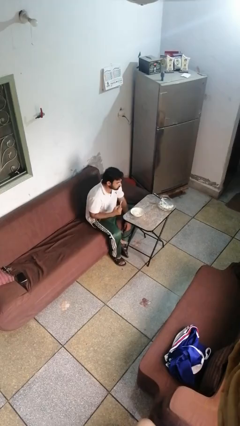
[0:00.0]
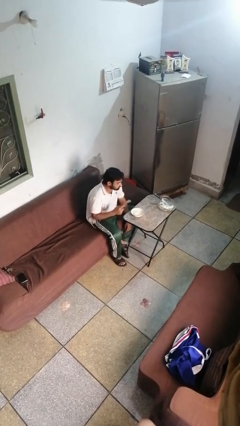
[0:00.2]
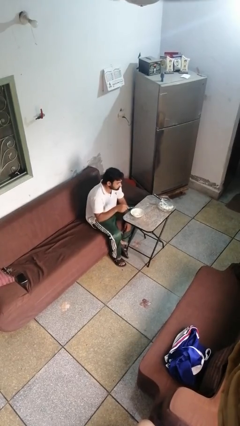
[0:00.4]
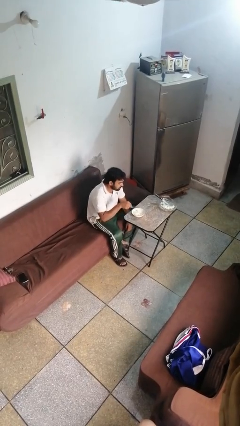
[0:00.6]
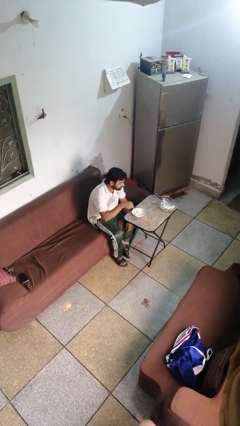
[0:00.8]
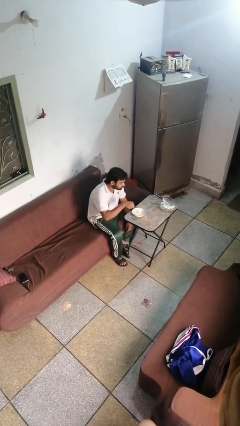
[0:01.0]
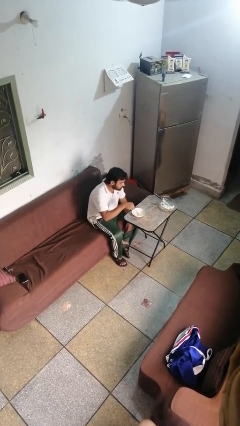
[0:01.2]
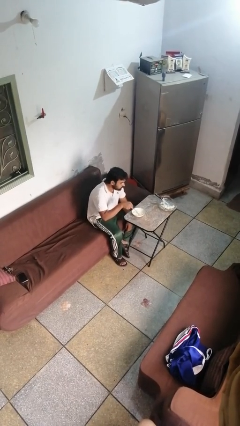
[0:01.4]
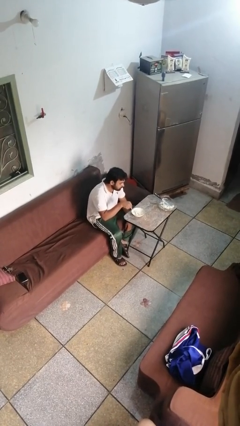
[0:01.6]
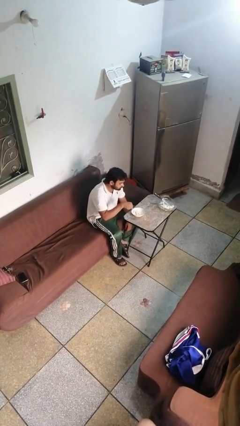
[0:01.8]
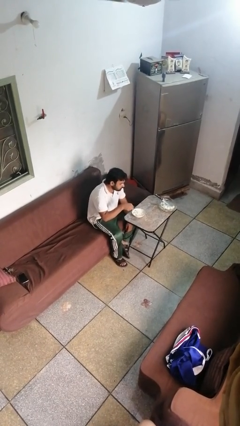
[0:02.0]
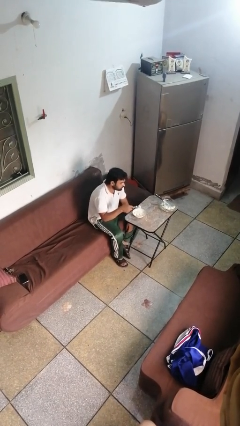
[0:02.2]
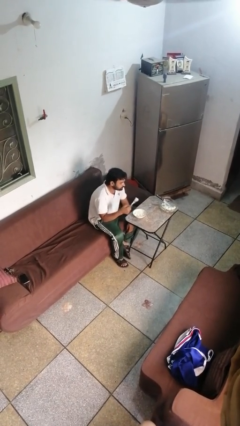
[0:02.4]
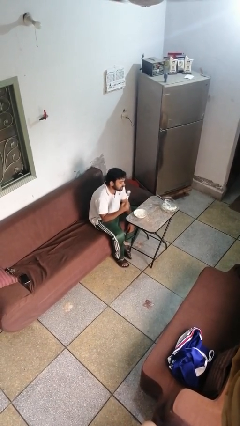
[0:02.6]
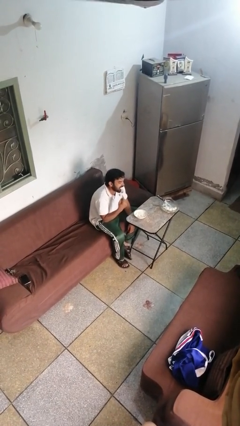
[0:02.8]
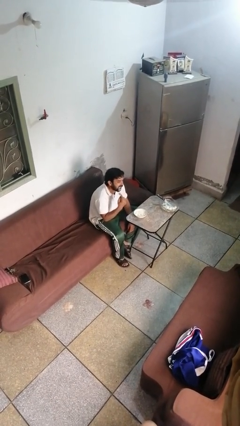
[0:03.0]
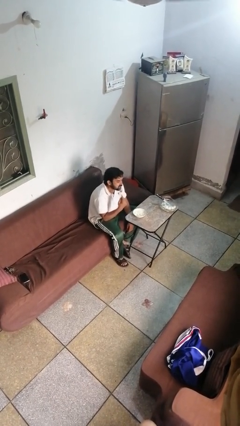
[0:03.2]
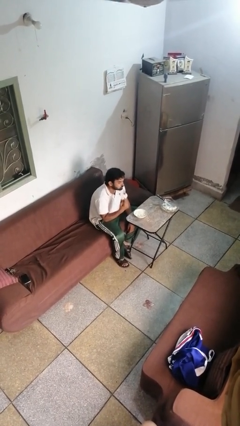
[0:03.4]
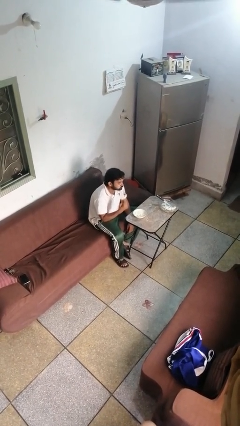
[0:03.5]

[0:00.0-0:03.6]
person eats with utensil

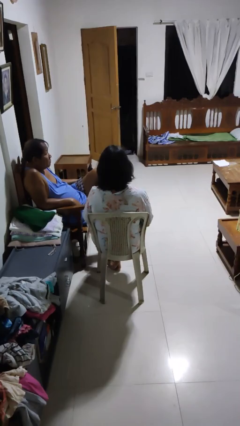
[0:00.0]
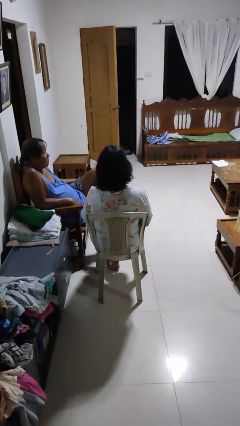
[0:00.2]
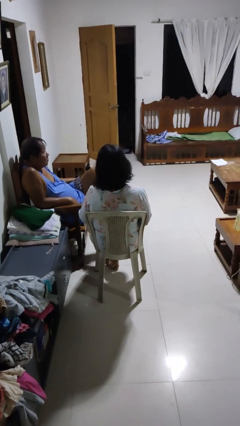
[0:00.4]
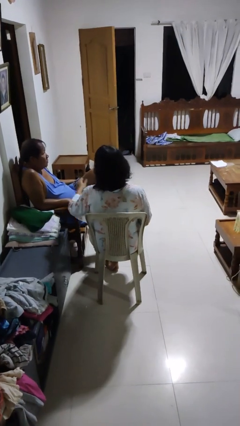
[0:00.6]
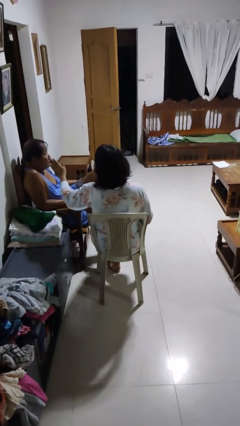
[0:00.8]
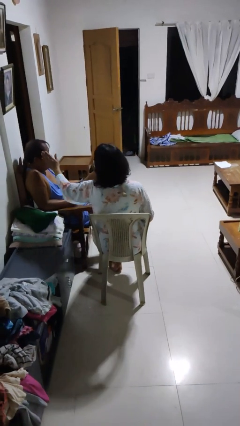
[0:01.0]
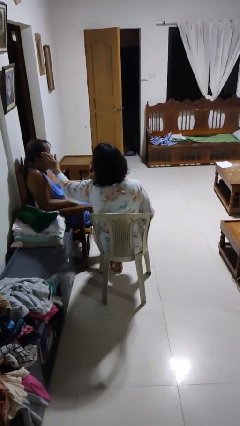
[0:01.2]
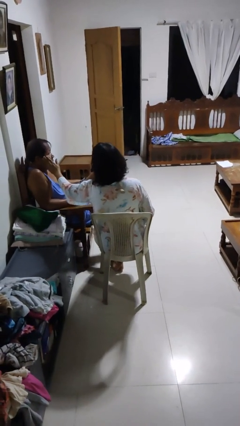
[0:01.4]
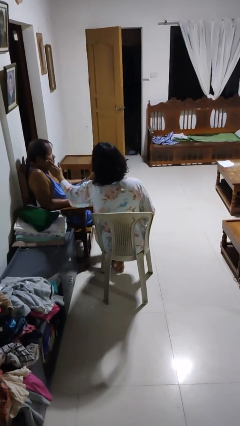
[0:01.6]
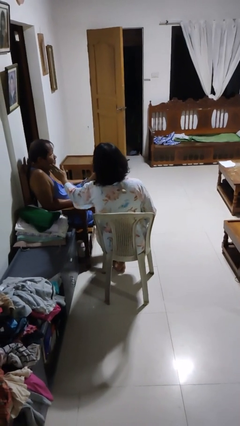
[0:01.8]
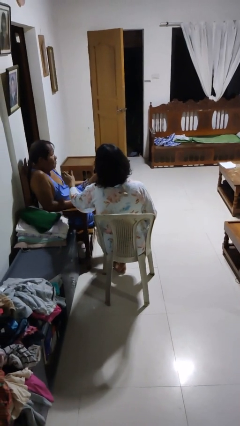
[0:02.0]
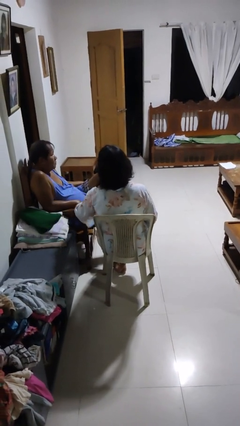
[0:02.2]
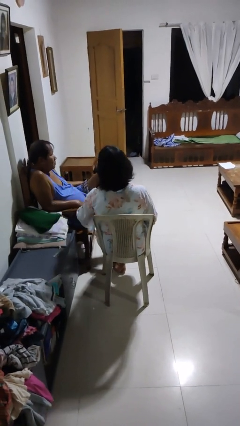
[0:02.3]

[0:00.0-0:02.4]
person touches face of person

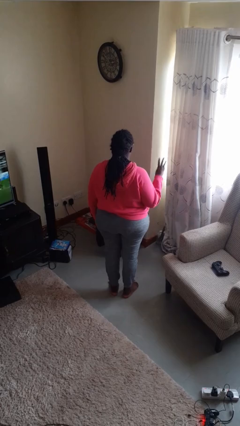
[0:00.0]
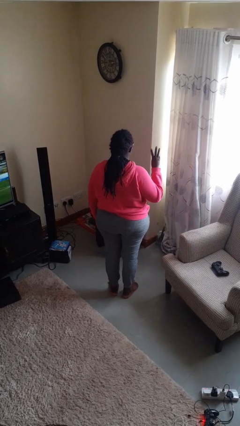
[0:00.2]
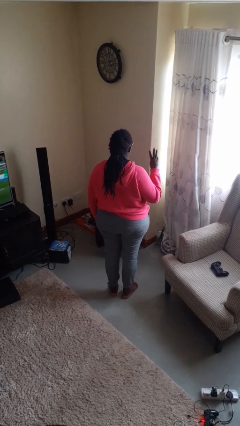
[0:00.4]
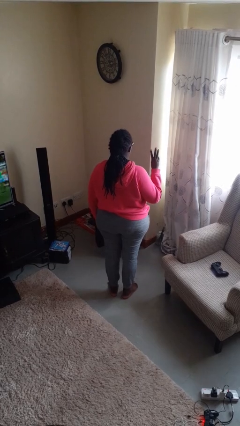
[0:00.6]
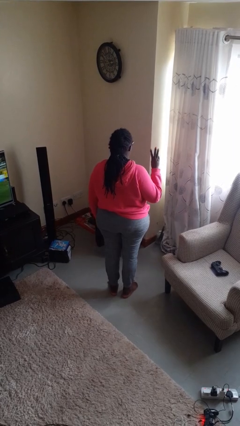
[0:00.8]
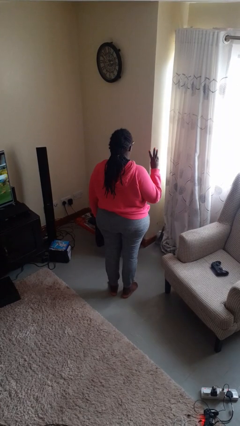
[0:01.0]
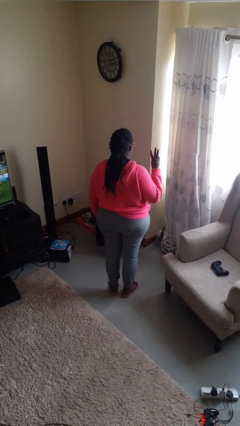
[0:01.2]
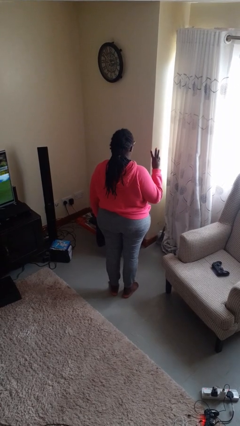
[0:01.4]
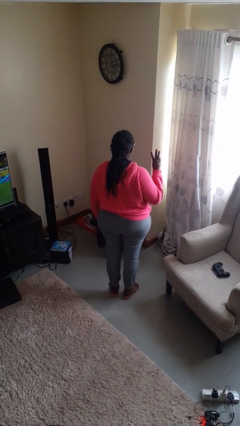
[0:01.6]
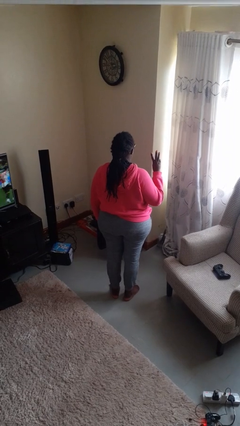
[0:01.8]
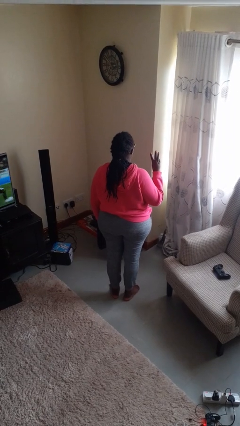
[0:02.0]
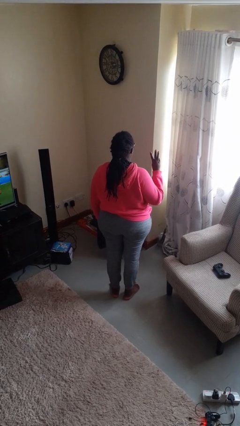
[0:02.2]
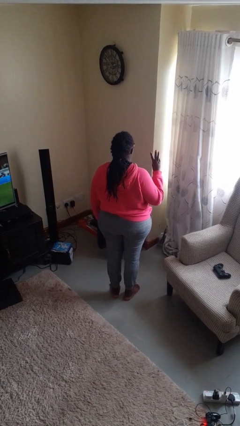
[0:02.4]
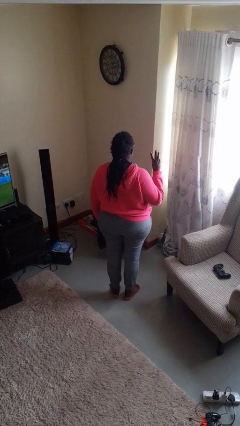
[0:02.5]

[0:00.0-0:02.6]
person gestures number three

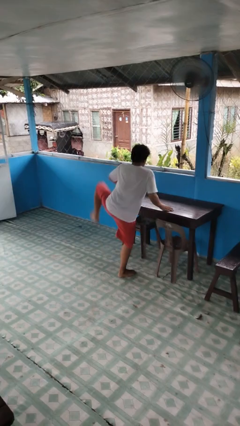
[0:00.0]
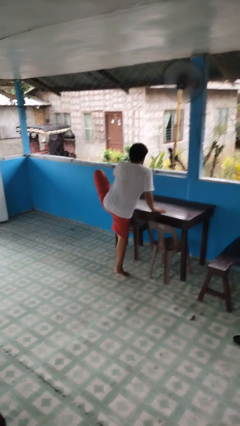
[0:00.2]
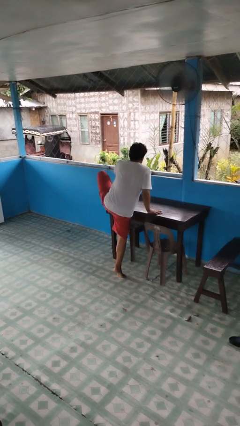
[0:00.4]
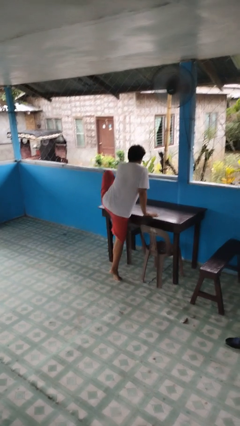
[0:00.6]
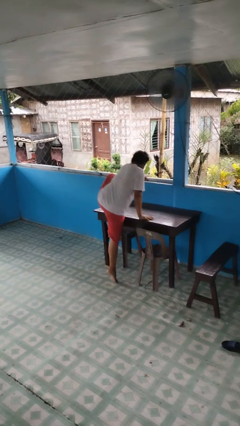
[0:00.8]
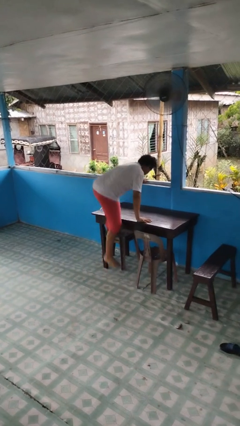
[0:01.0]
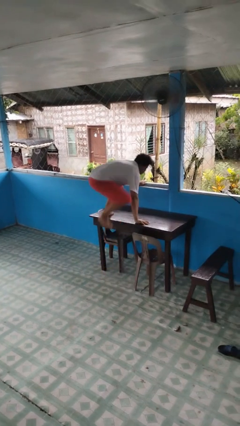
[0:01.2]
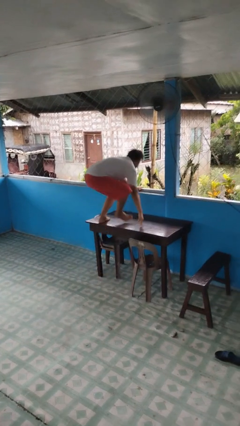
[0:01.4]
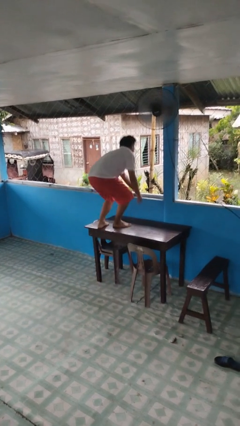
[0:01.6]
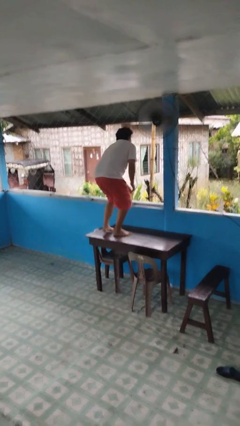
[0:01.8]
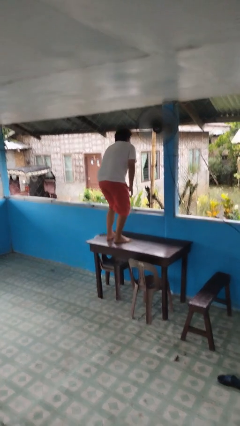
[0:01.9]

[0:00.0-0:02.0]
person climbs on table

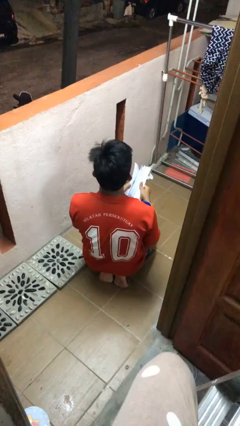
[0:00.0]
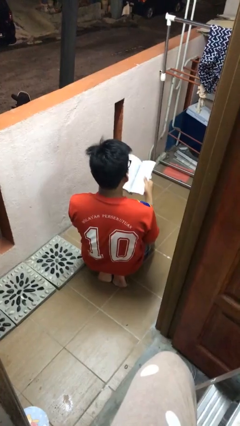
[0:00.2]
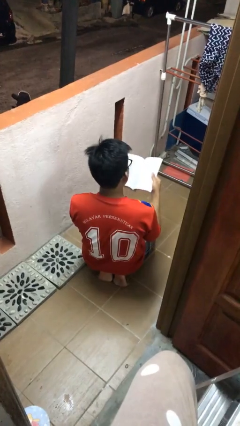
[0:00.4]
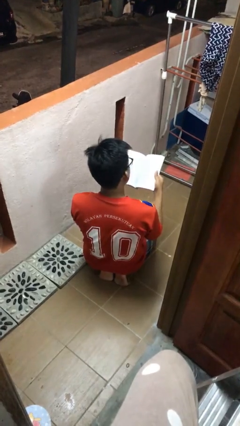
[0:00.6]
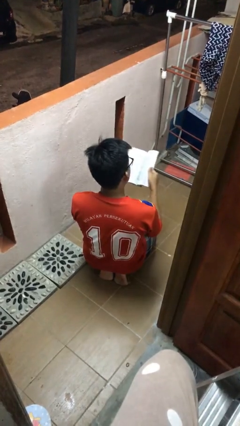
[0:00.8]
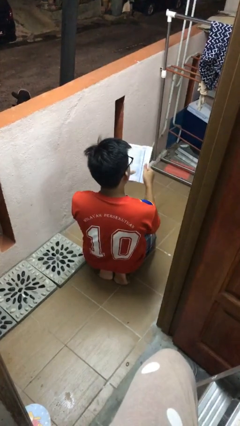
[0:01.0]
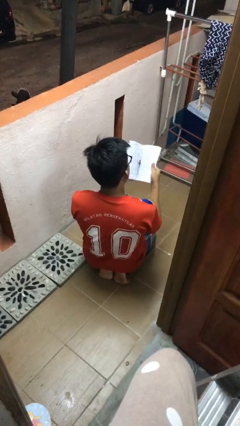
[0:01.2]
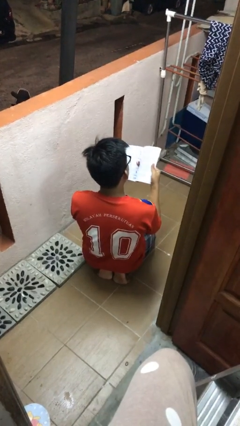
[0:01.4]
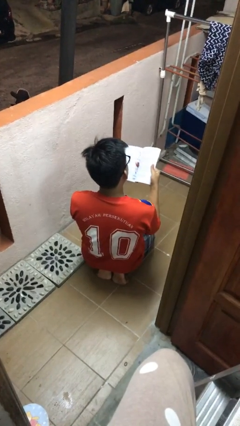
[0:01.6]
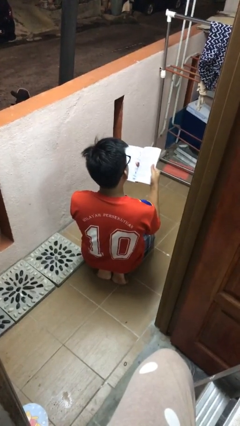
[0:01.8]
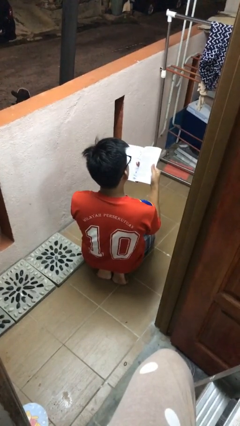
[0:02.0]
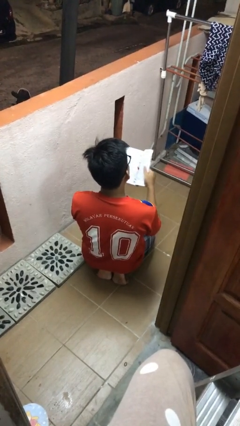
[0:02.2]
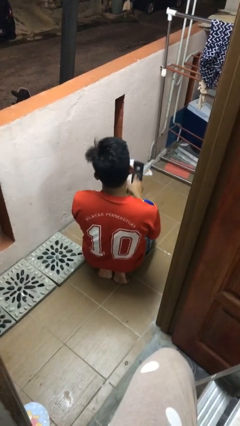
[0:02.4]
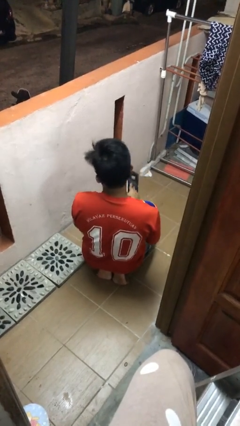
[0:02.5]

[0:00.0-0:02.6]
person reads book
